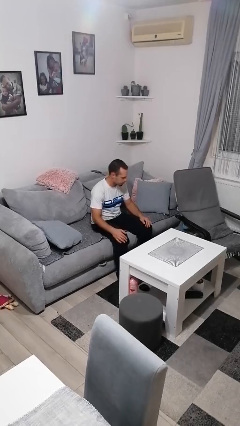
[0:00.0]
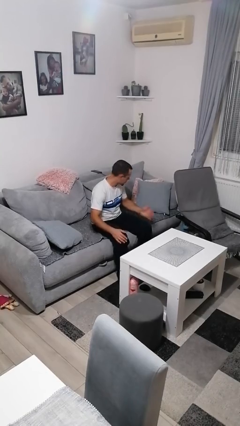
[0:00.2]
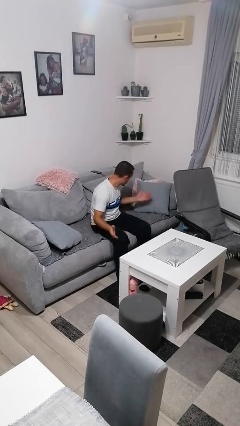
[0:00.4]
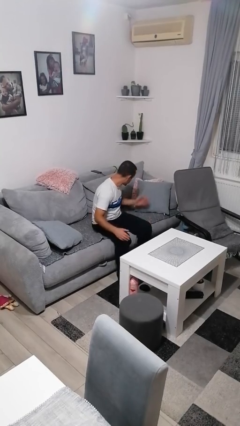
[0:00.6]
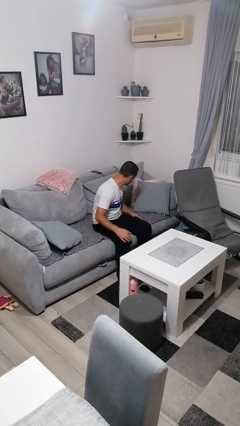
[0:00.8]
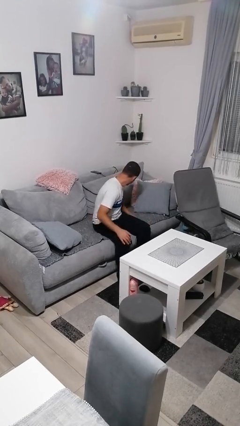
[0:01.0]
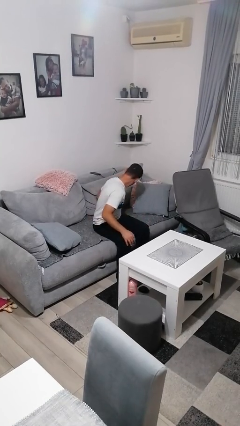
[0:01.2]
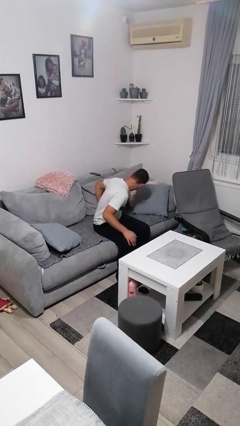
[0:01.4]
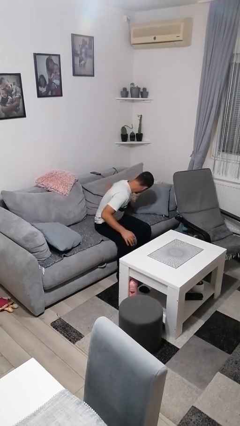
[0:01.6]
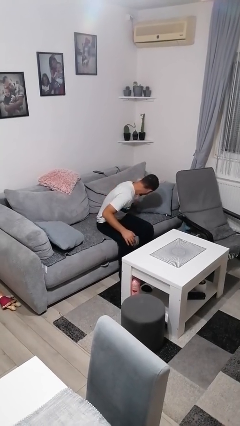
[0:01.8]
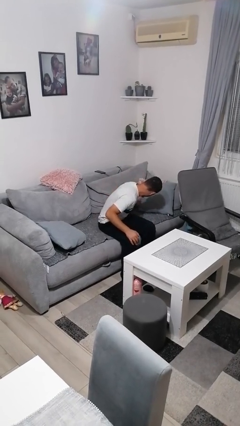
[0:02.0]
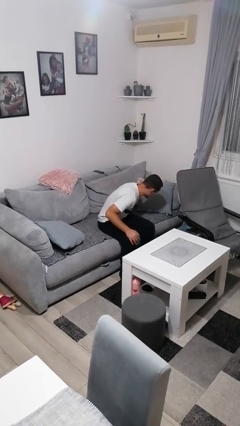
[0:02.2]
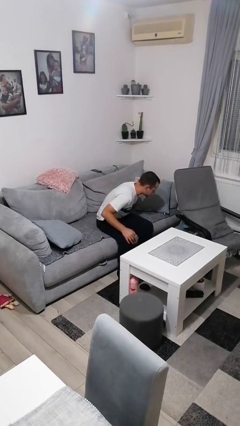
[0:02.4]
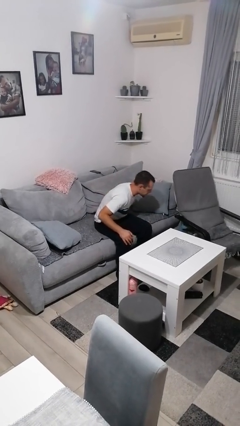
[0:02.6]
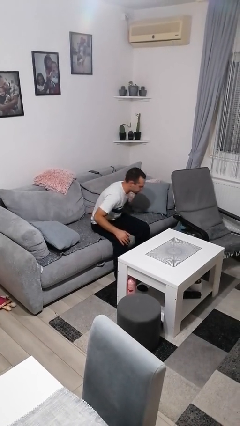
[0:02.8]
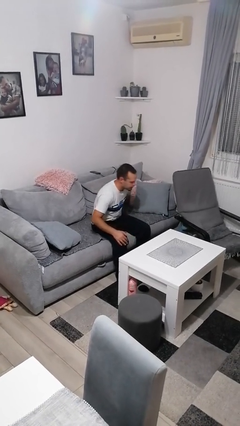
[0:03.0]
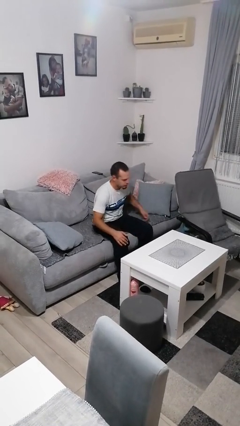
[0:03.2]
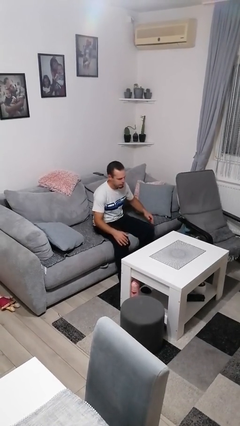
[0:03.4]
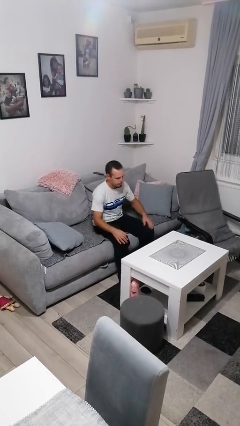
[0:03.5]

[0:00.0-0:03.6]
person searches in couch

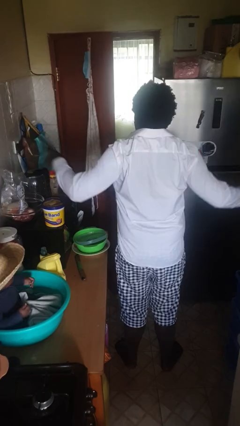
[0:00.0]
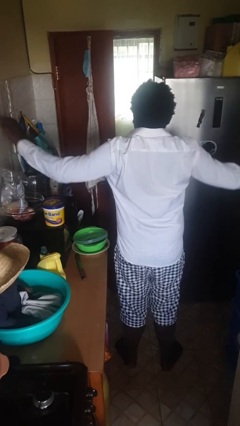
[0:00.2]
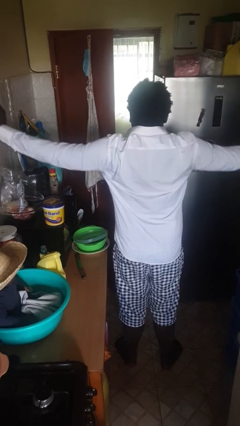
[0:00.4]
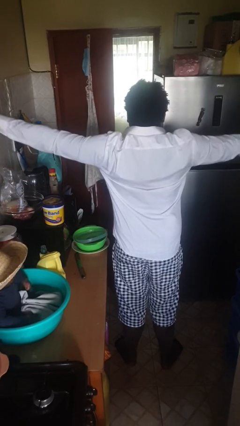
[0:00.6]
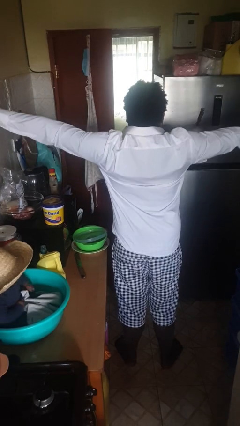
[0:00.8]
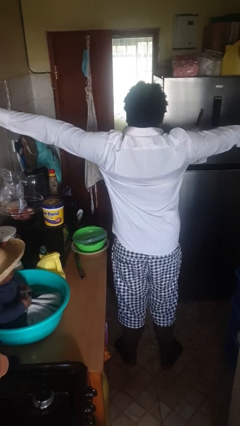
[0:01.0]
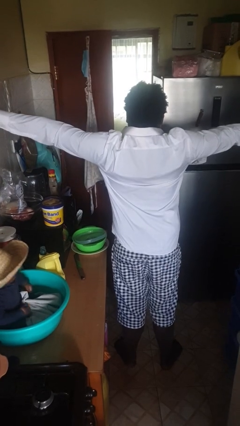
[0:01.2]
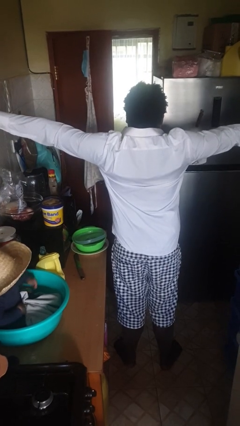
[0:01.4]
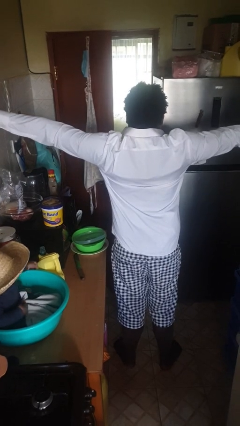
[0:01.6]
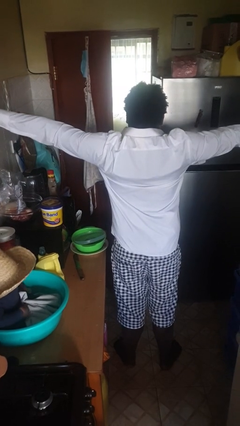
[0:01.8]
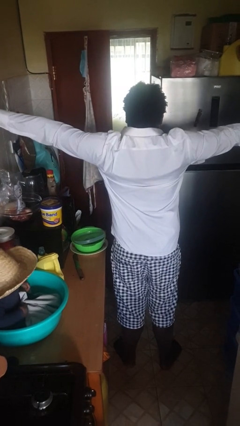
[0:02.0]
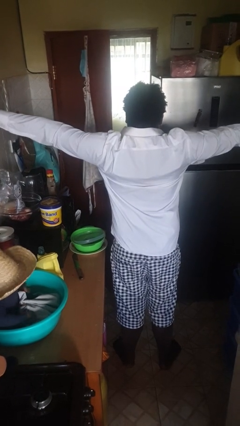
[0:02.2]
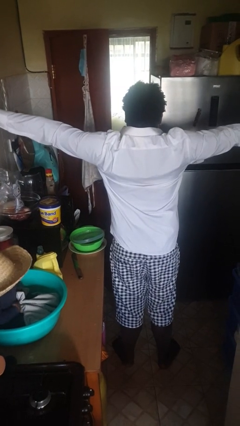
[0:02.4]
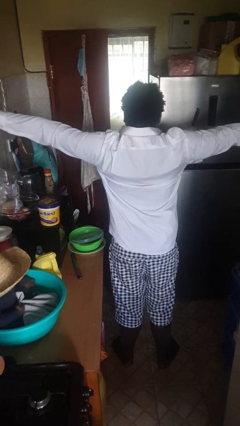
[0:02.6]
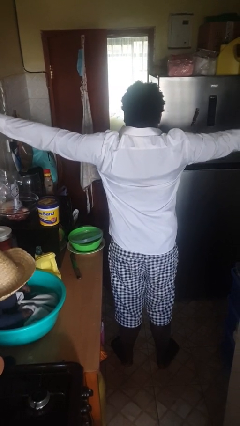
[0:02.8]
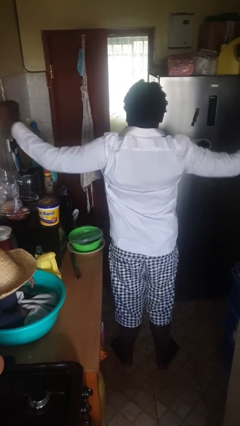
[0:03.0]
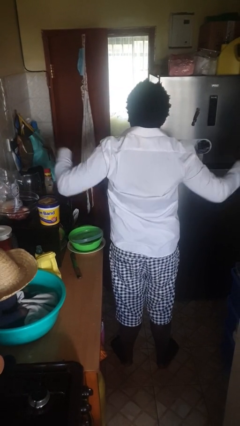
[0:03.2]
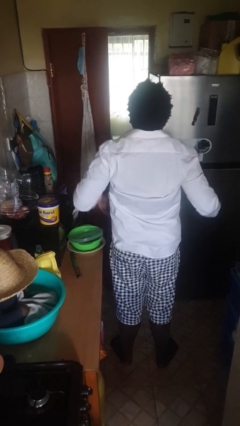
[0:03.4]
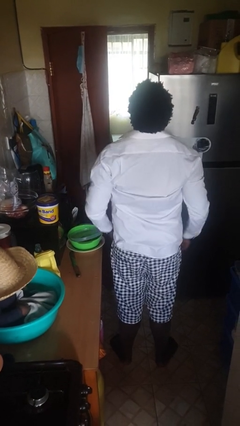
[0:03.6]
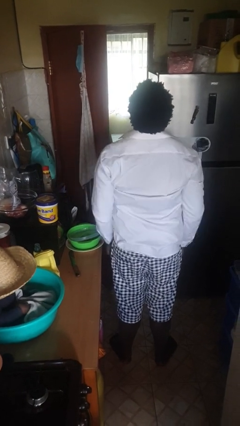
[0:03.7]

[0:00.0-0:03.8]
person stretches arms to side

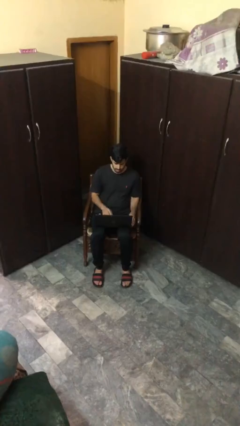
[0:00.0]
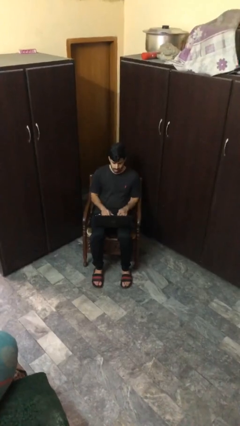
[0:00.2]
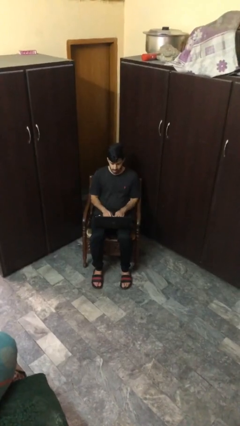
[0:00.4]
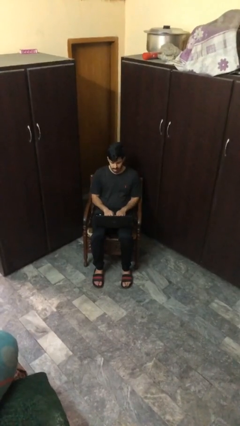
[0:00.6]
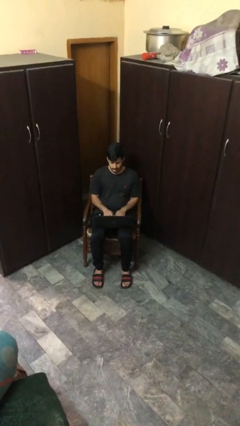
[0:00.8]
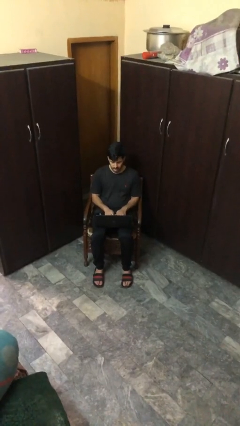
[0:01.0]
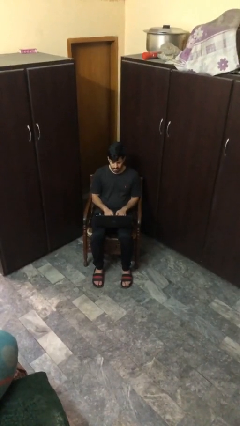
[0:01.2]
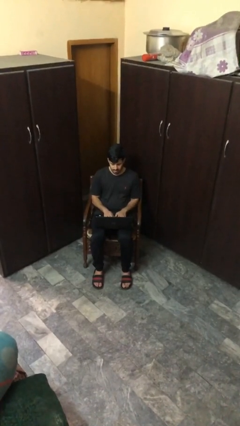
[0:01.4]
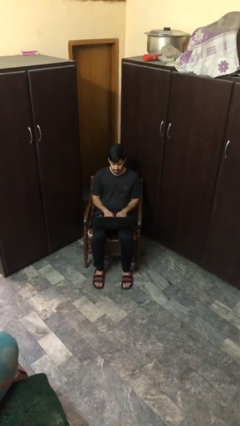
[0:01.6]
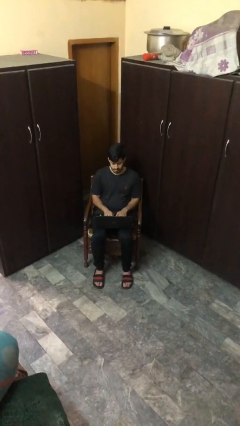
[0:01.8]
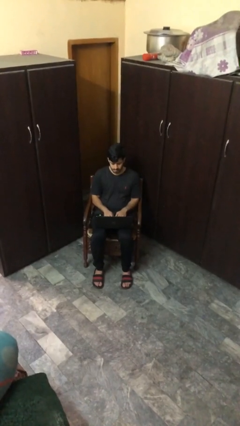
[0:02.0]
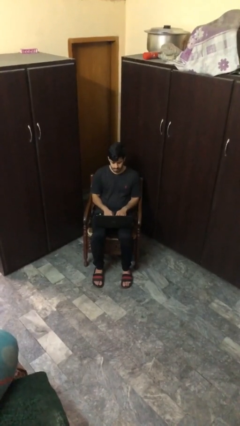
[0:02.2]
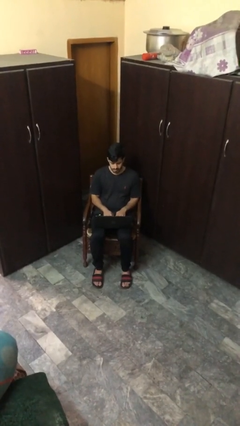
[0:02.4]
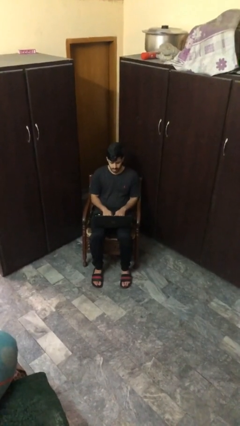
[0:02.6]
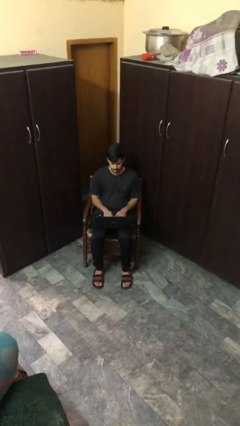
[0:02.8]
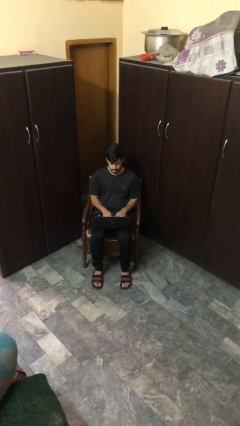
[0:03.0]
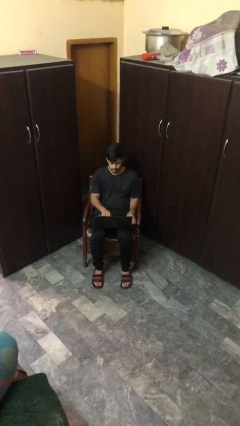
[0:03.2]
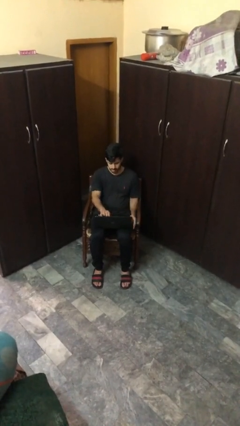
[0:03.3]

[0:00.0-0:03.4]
person interacts with laptop

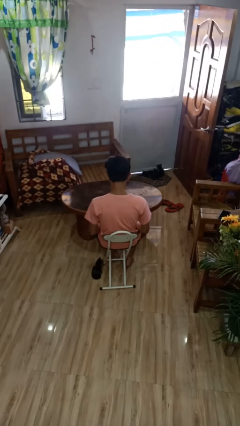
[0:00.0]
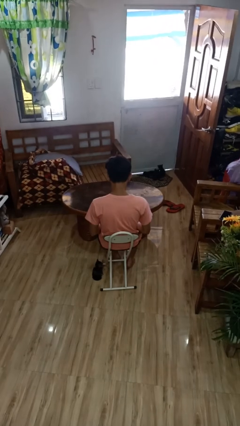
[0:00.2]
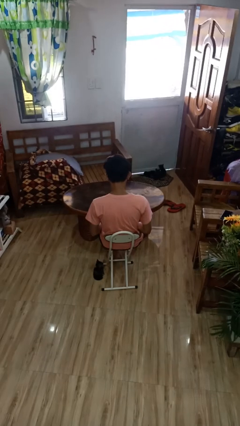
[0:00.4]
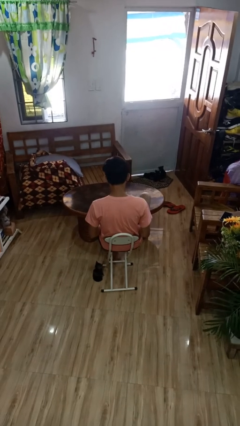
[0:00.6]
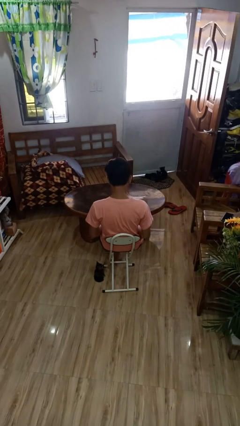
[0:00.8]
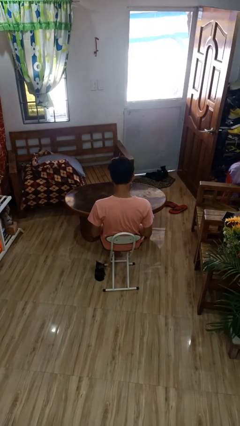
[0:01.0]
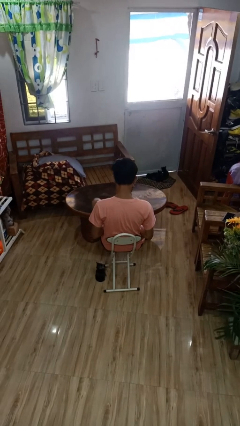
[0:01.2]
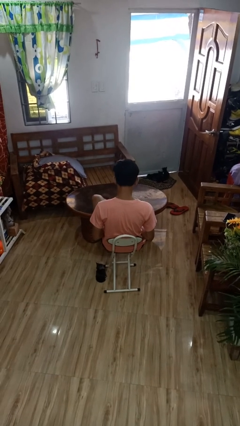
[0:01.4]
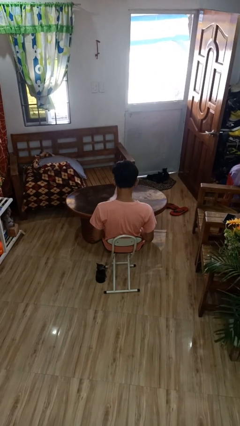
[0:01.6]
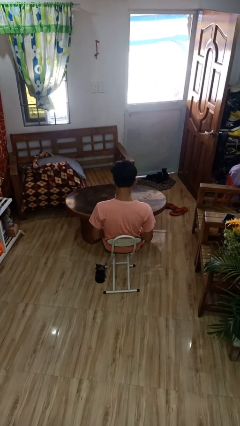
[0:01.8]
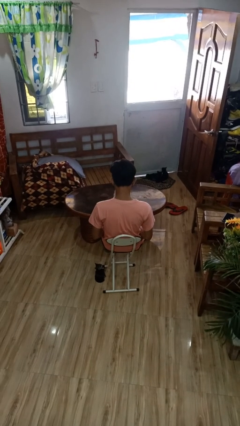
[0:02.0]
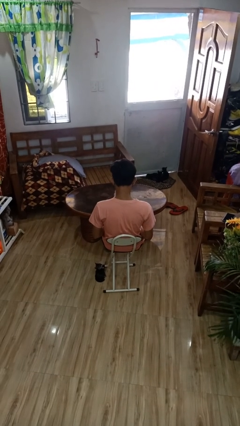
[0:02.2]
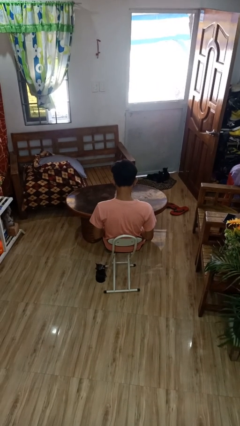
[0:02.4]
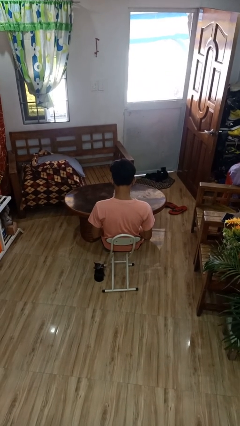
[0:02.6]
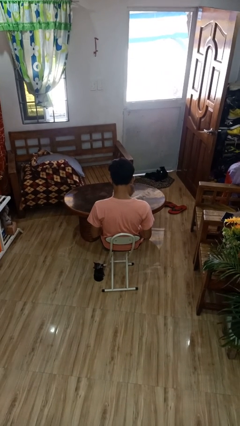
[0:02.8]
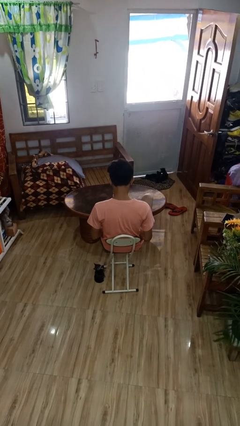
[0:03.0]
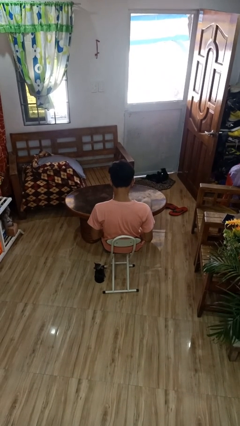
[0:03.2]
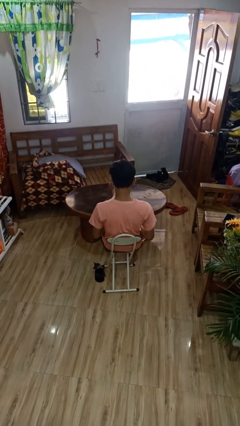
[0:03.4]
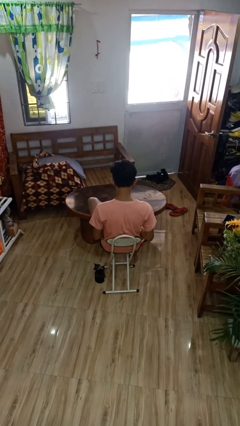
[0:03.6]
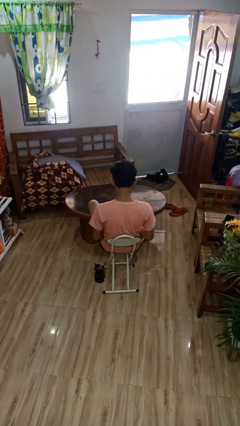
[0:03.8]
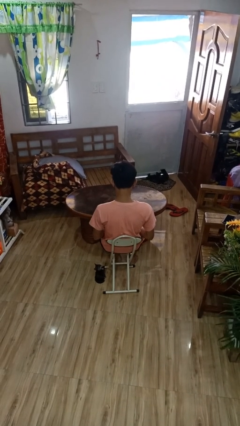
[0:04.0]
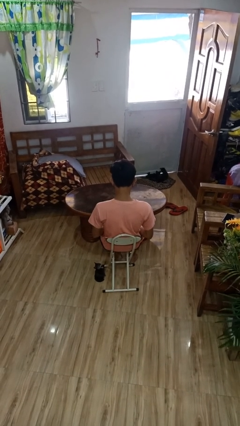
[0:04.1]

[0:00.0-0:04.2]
person puts feet up

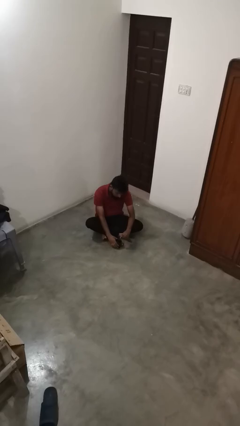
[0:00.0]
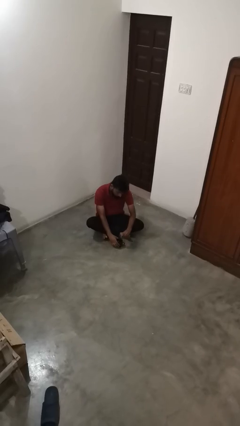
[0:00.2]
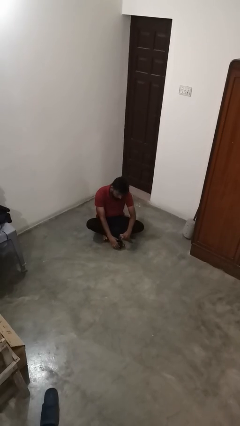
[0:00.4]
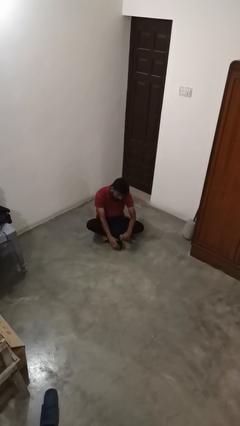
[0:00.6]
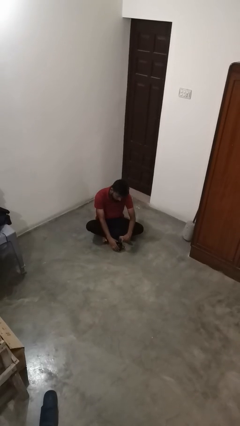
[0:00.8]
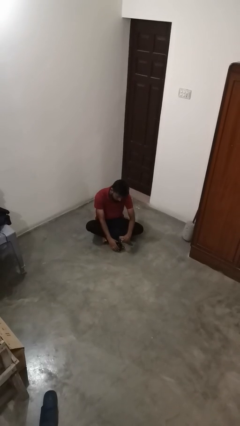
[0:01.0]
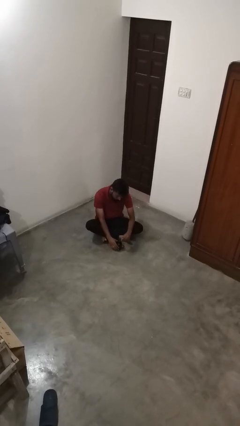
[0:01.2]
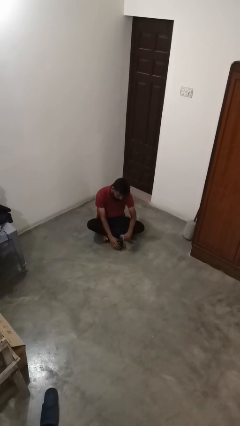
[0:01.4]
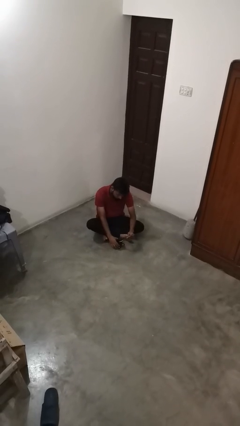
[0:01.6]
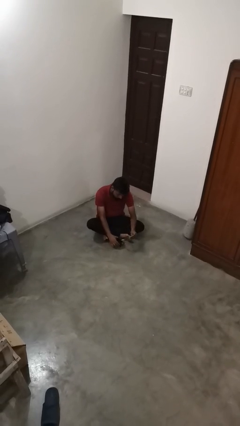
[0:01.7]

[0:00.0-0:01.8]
person stirs mug

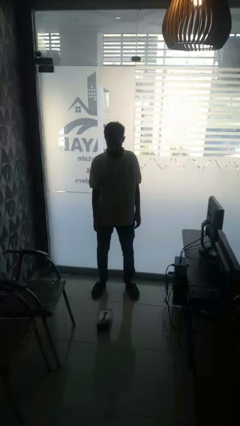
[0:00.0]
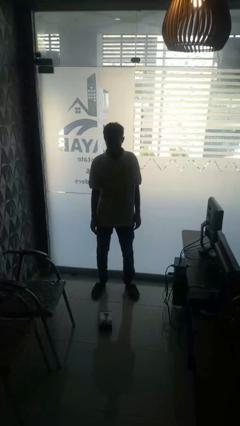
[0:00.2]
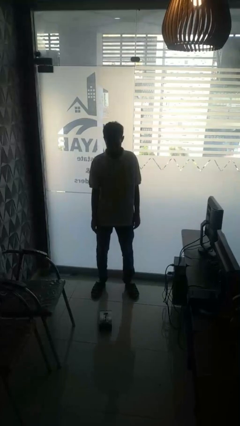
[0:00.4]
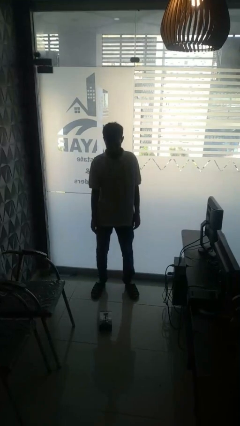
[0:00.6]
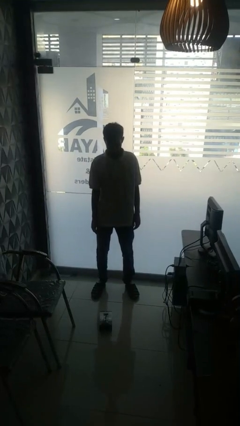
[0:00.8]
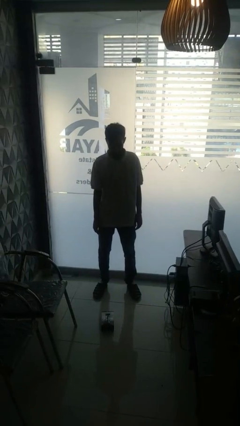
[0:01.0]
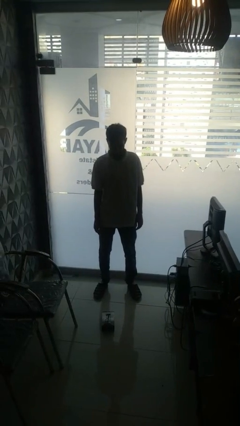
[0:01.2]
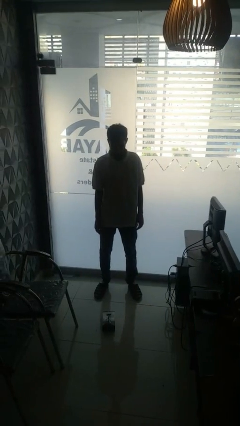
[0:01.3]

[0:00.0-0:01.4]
person throws object to ground
